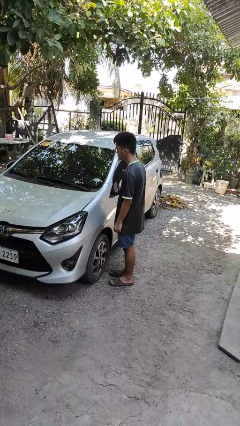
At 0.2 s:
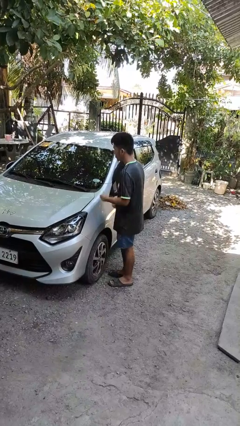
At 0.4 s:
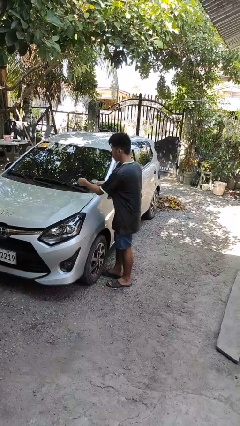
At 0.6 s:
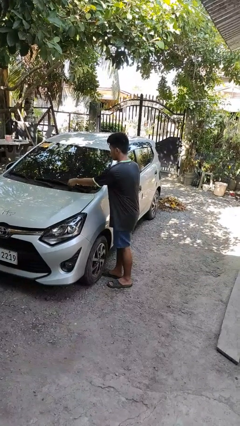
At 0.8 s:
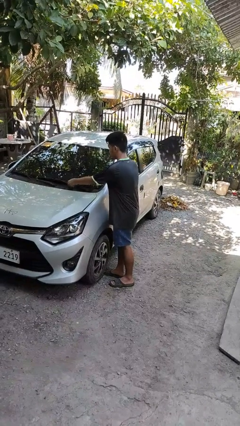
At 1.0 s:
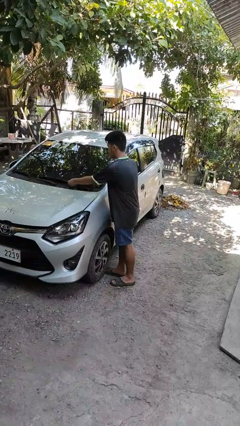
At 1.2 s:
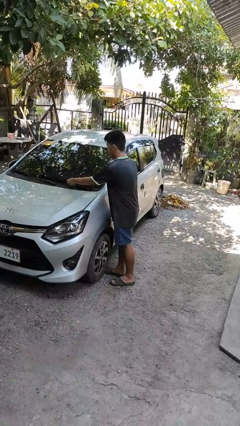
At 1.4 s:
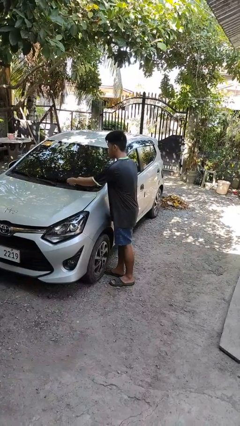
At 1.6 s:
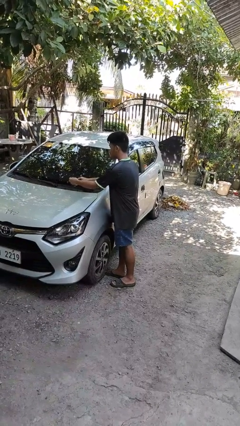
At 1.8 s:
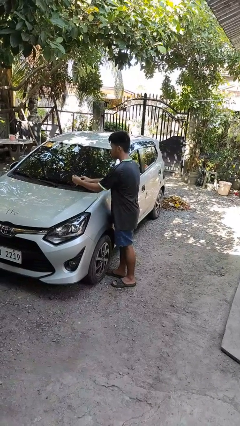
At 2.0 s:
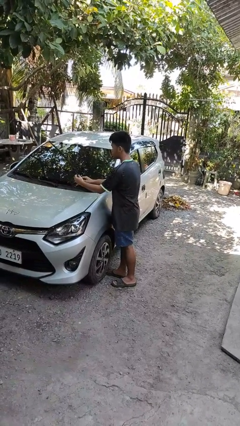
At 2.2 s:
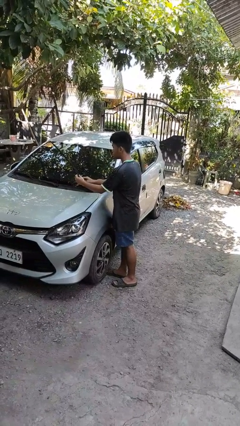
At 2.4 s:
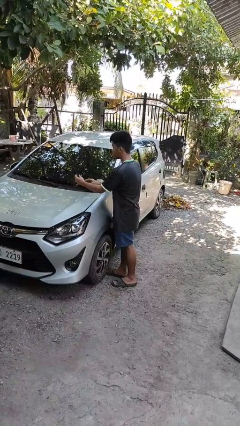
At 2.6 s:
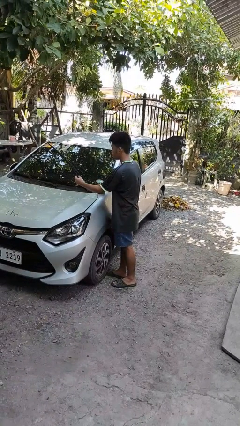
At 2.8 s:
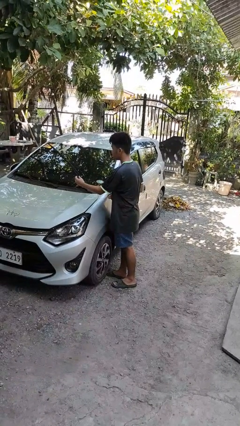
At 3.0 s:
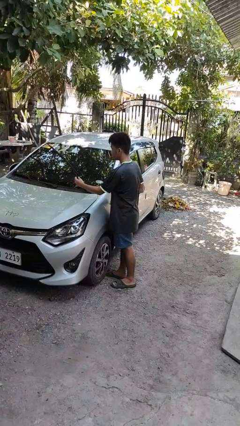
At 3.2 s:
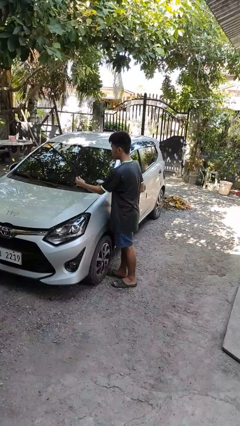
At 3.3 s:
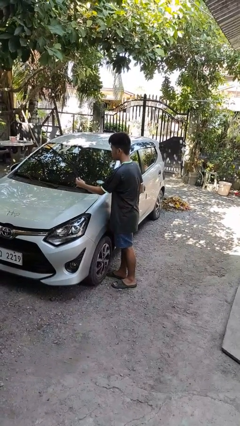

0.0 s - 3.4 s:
person flips up car wipers

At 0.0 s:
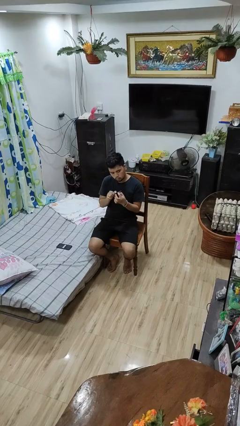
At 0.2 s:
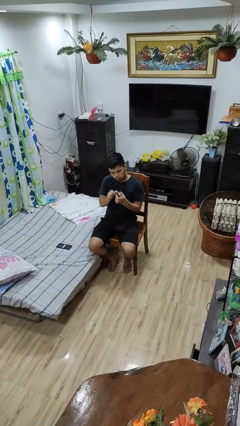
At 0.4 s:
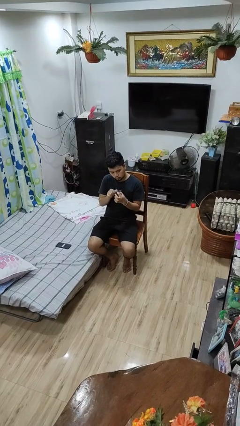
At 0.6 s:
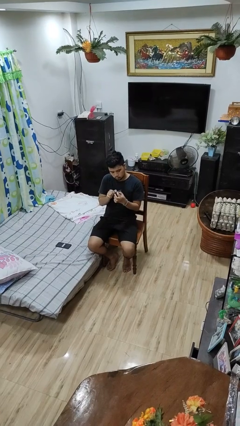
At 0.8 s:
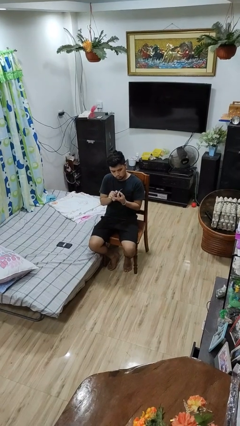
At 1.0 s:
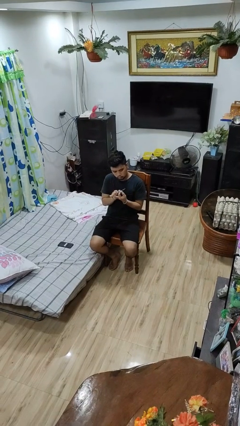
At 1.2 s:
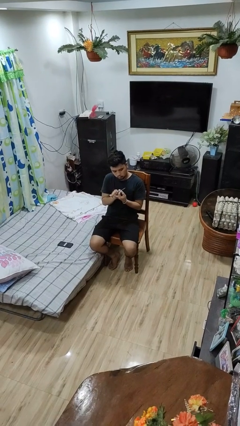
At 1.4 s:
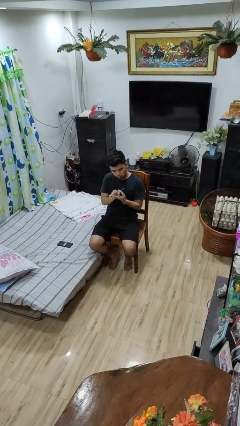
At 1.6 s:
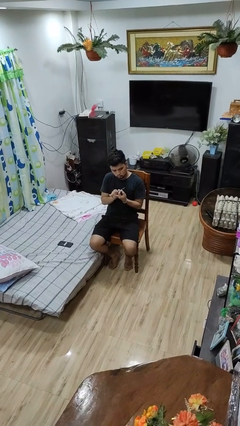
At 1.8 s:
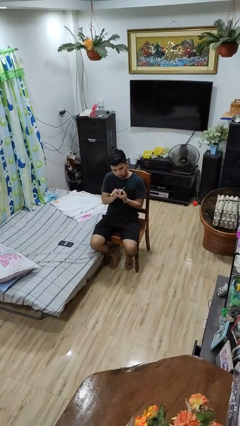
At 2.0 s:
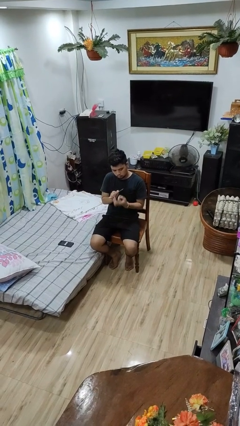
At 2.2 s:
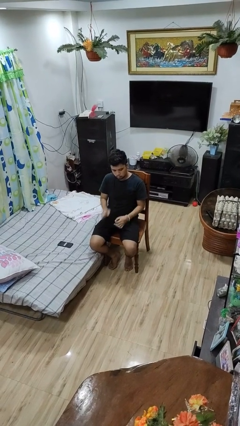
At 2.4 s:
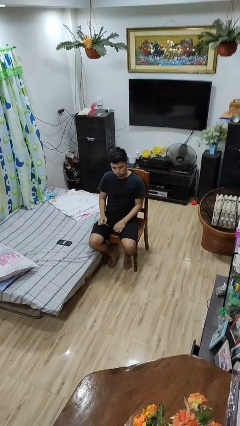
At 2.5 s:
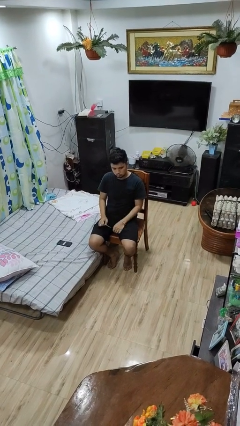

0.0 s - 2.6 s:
person files fingernails

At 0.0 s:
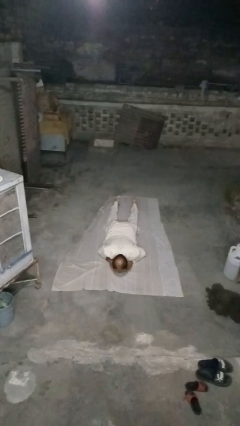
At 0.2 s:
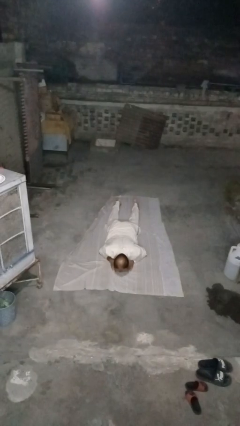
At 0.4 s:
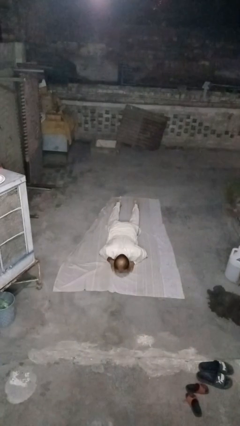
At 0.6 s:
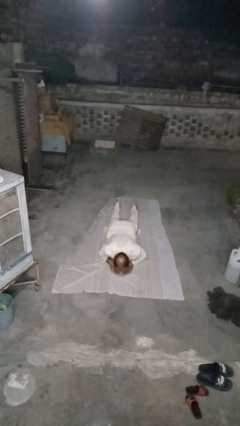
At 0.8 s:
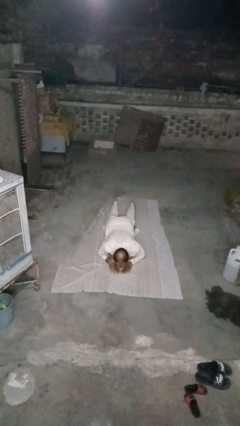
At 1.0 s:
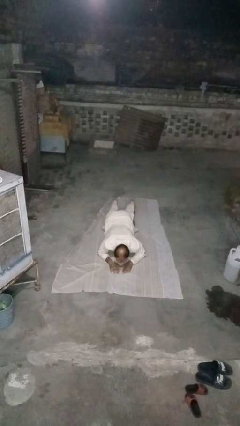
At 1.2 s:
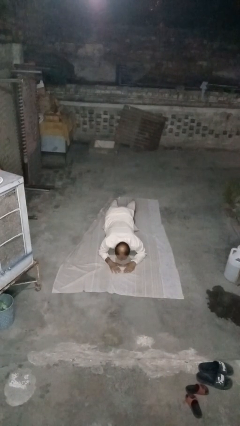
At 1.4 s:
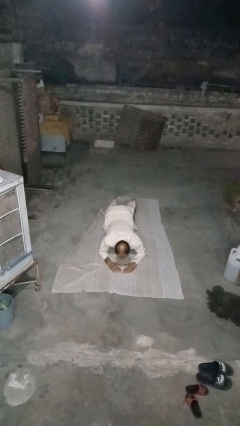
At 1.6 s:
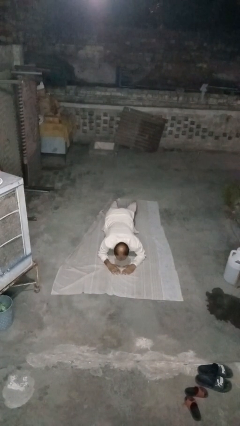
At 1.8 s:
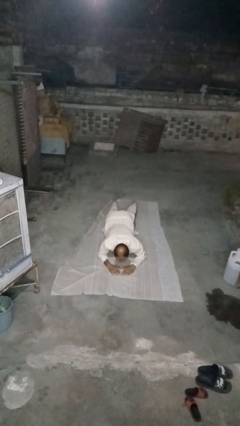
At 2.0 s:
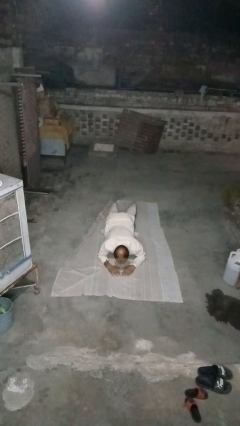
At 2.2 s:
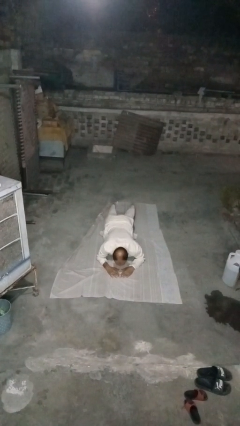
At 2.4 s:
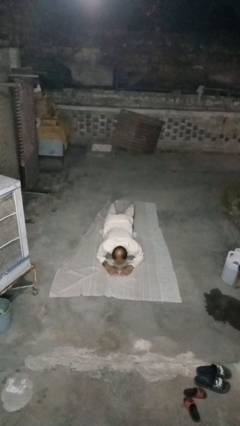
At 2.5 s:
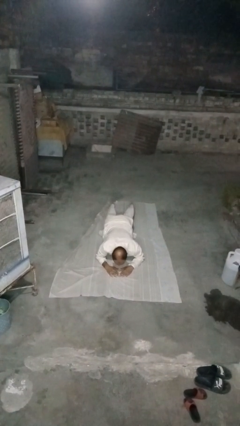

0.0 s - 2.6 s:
person exercises with plank

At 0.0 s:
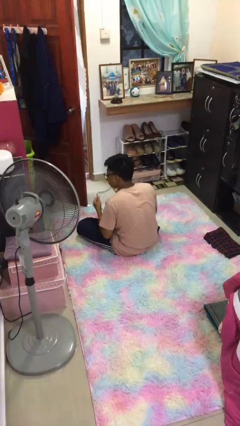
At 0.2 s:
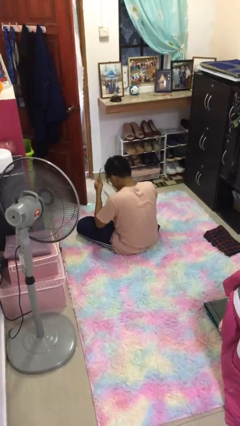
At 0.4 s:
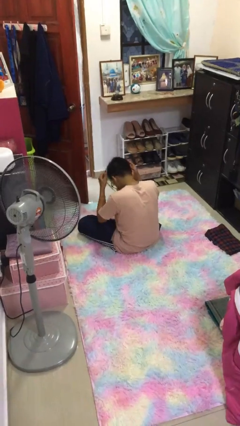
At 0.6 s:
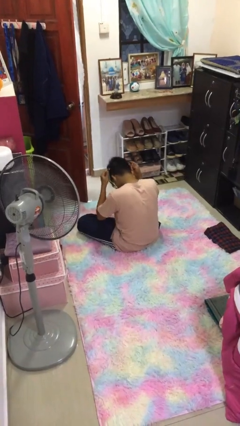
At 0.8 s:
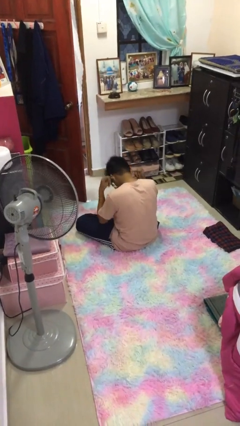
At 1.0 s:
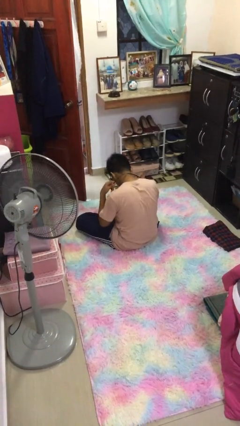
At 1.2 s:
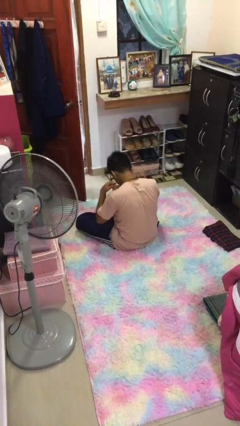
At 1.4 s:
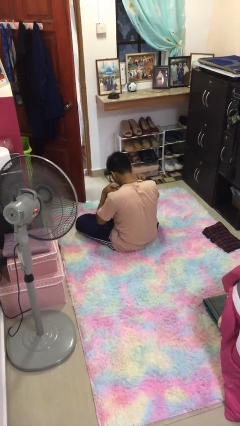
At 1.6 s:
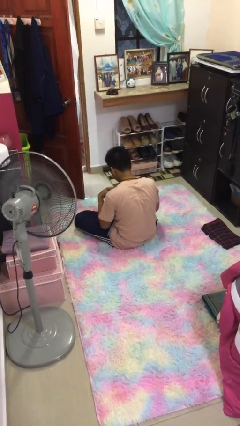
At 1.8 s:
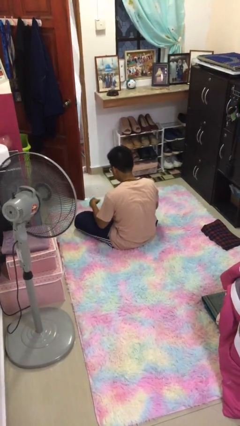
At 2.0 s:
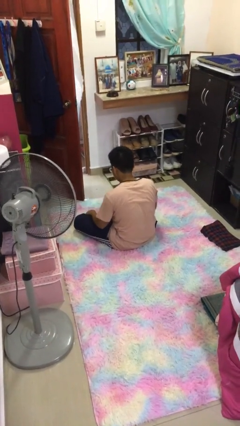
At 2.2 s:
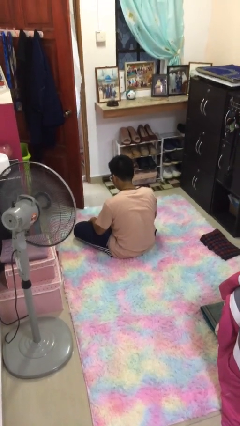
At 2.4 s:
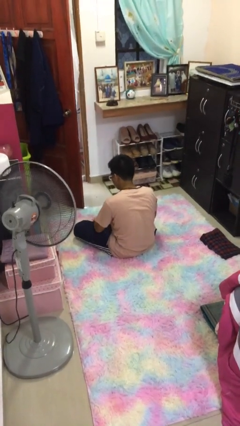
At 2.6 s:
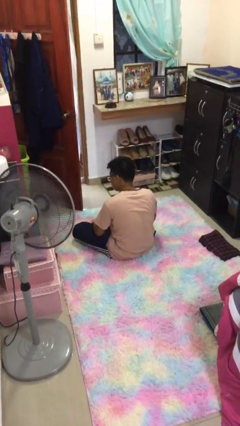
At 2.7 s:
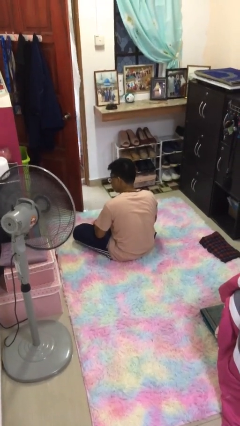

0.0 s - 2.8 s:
person puts on necklace

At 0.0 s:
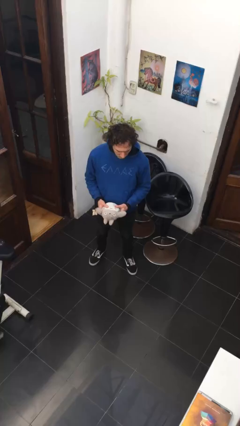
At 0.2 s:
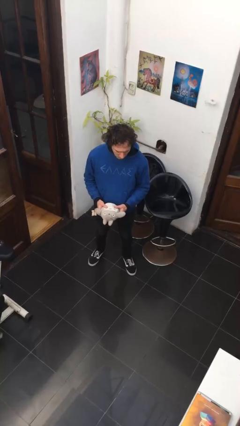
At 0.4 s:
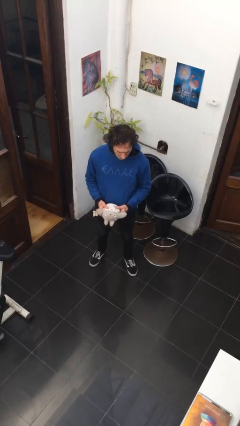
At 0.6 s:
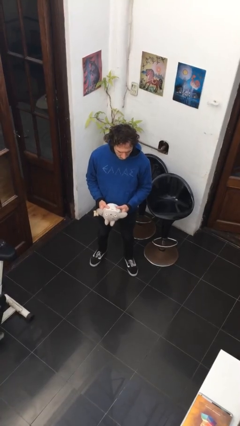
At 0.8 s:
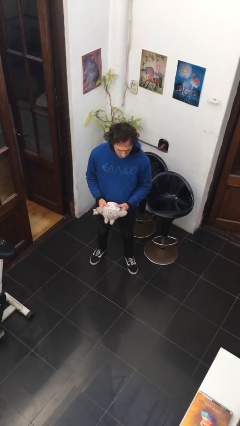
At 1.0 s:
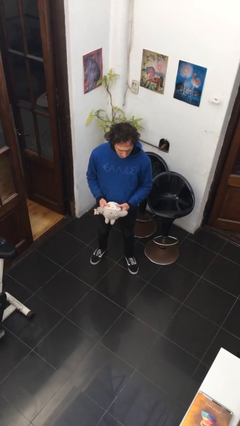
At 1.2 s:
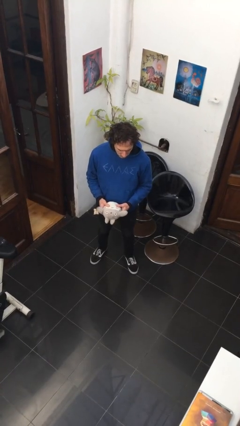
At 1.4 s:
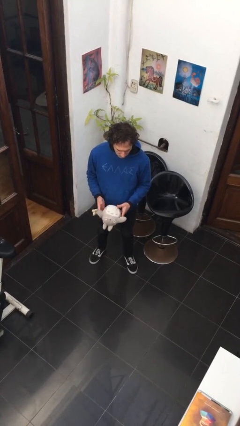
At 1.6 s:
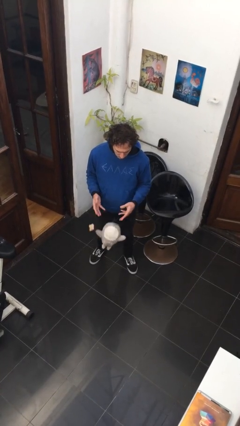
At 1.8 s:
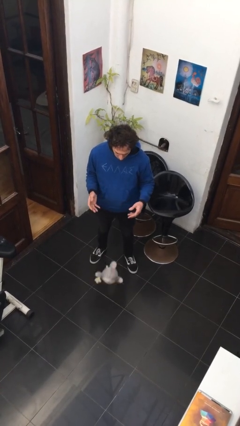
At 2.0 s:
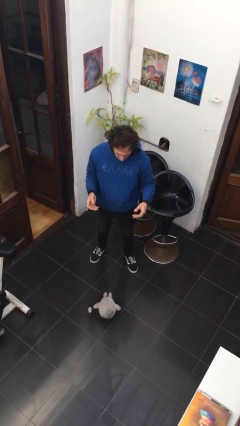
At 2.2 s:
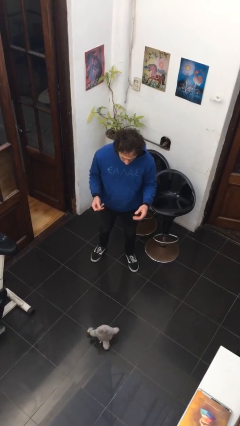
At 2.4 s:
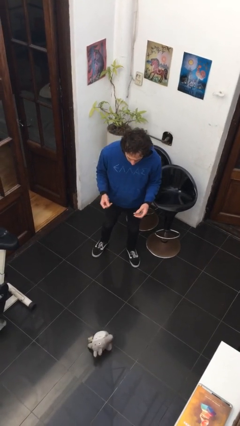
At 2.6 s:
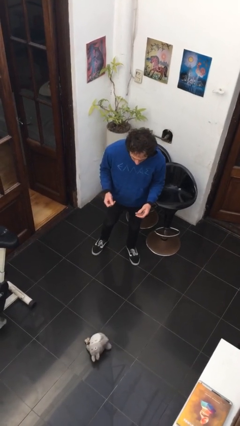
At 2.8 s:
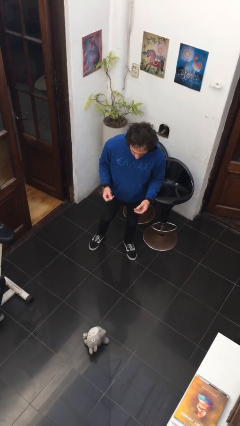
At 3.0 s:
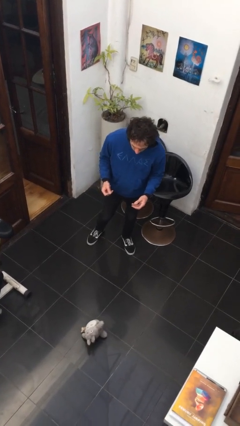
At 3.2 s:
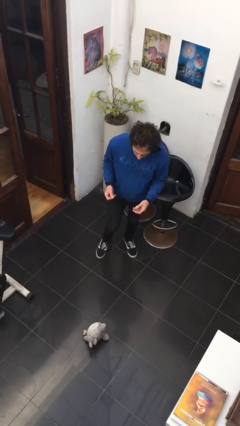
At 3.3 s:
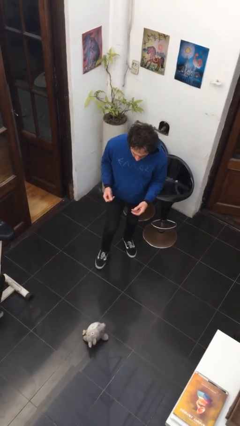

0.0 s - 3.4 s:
person drops object

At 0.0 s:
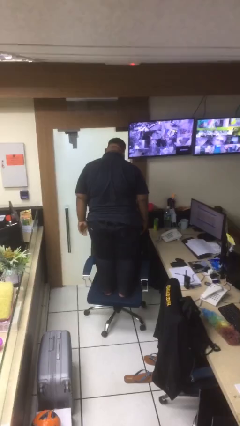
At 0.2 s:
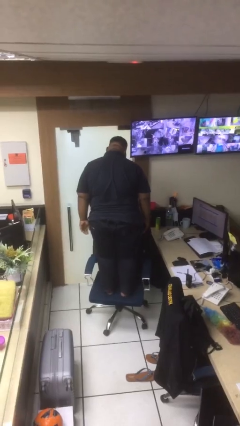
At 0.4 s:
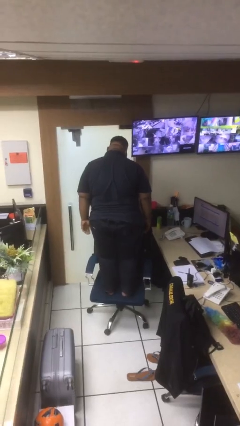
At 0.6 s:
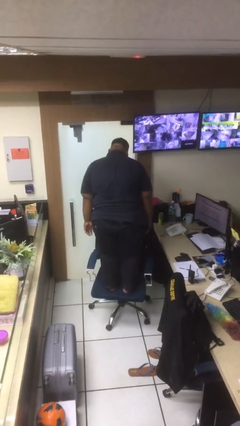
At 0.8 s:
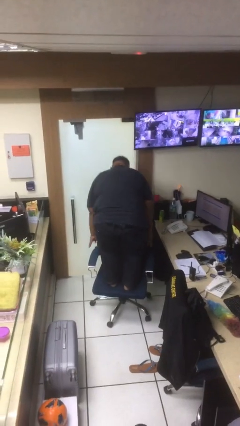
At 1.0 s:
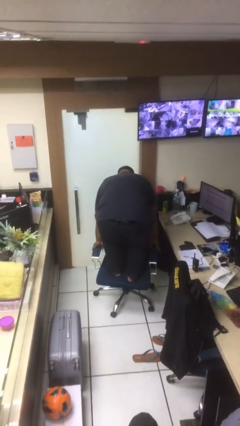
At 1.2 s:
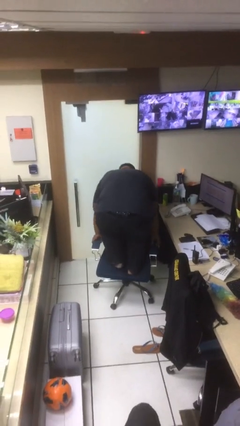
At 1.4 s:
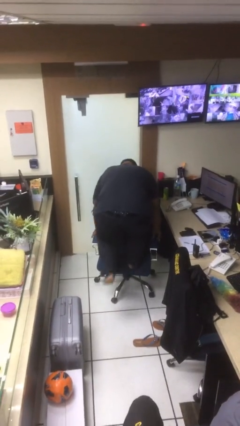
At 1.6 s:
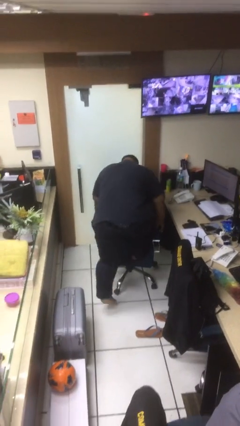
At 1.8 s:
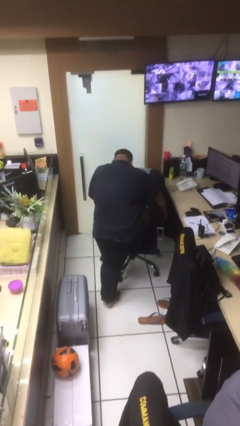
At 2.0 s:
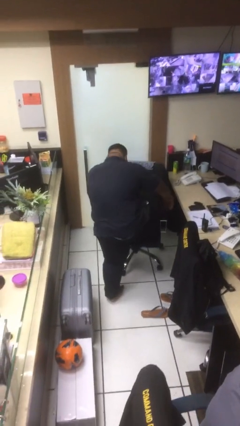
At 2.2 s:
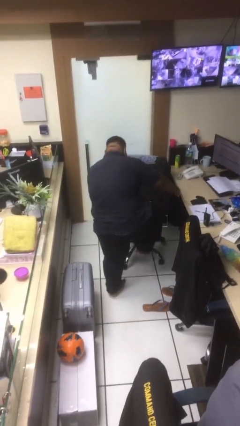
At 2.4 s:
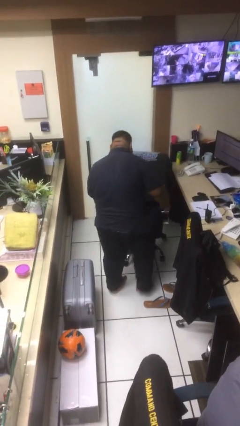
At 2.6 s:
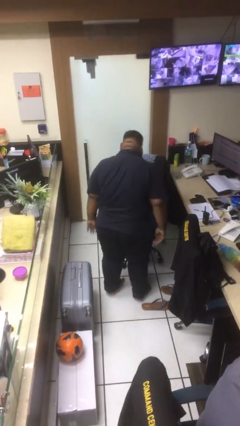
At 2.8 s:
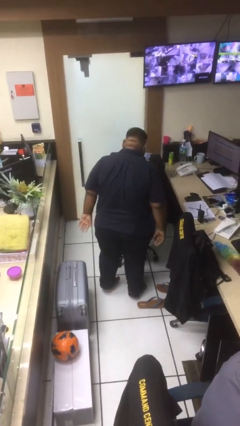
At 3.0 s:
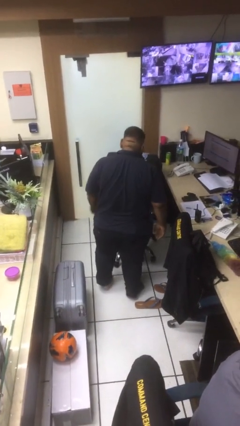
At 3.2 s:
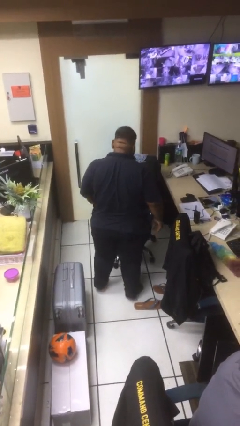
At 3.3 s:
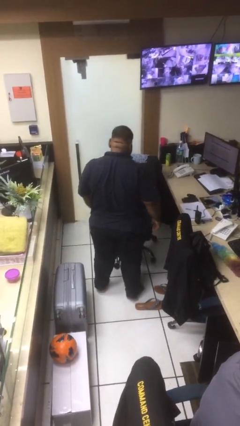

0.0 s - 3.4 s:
person climbs off chair
